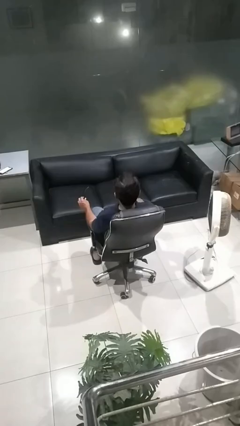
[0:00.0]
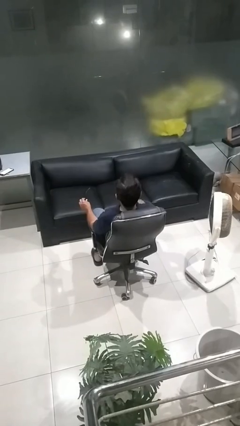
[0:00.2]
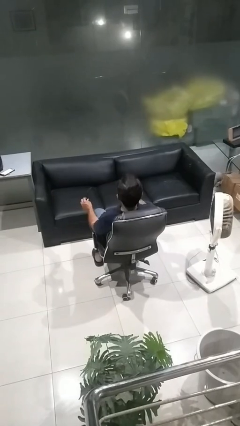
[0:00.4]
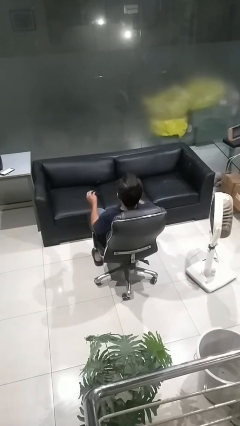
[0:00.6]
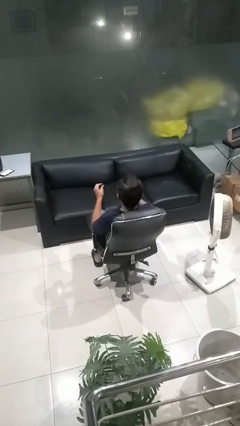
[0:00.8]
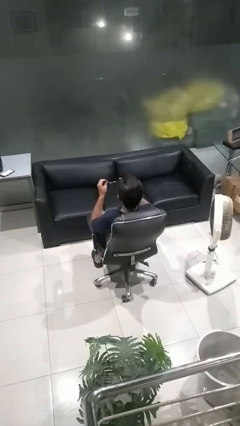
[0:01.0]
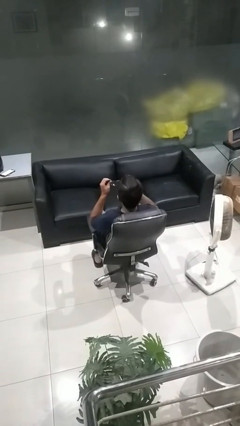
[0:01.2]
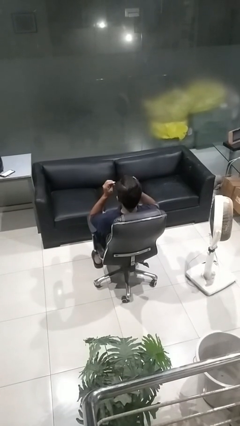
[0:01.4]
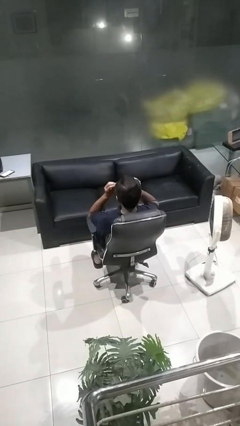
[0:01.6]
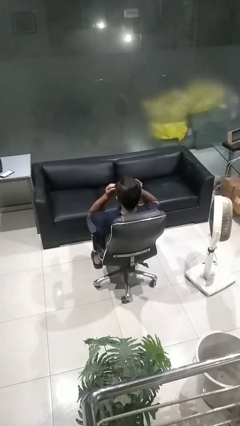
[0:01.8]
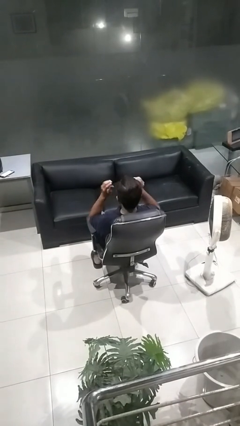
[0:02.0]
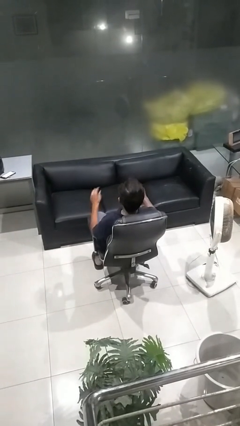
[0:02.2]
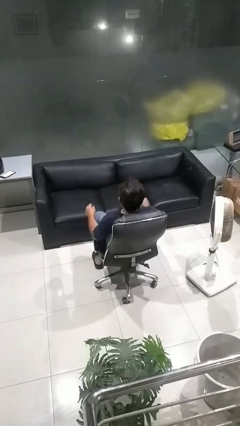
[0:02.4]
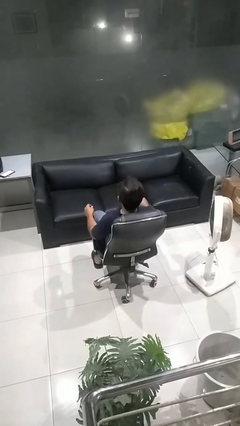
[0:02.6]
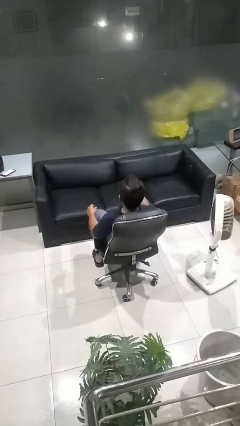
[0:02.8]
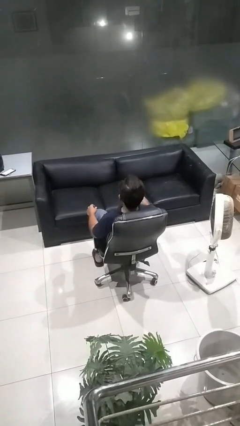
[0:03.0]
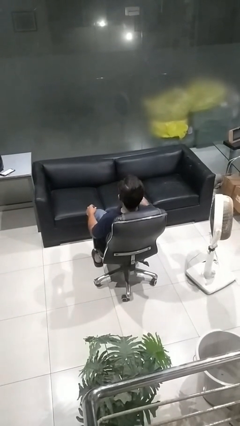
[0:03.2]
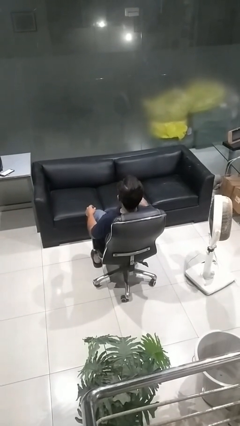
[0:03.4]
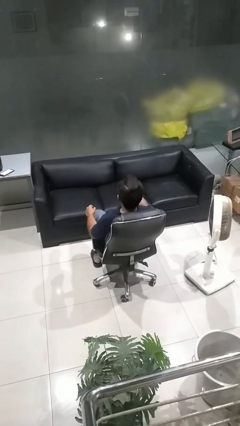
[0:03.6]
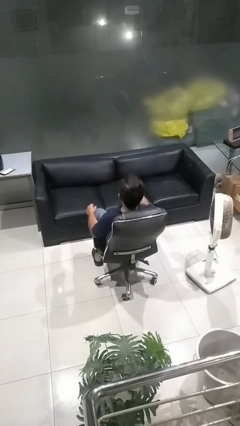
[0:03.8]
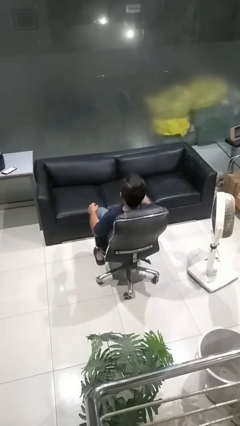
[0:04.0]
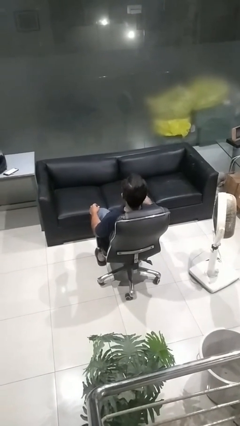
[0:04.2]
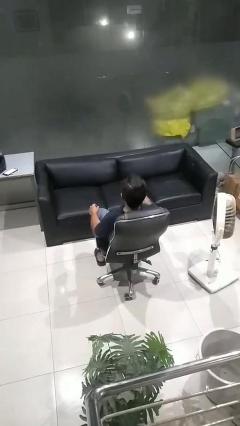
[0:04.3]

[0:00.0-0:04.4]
person puts on sunglasses

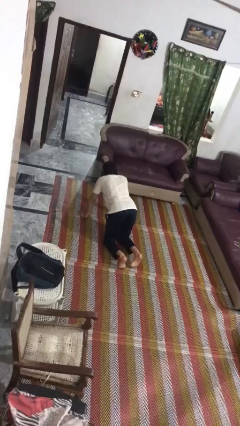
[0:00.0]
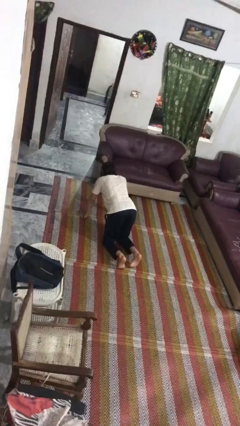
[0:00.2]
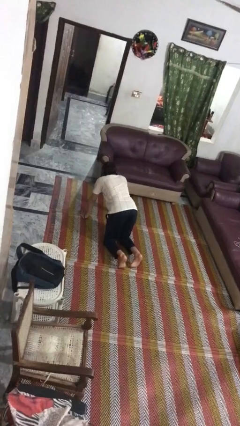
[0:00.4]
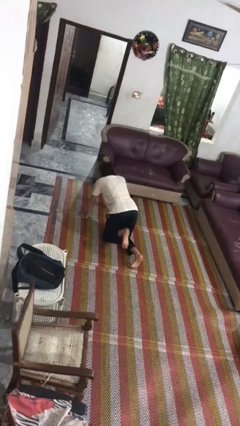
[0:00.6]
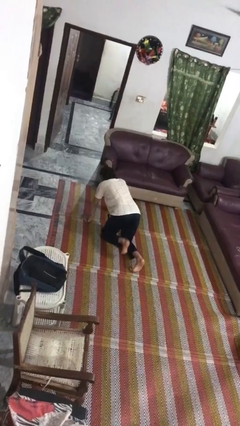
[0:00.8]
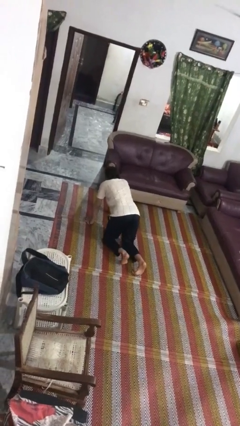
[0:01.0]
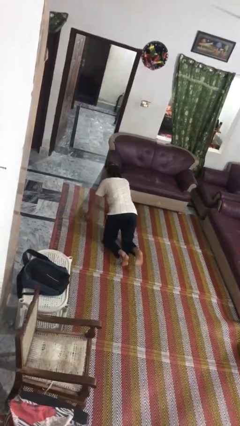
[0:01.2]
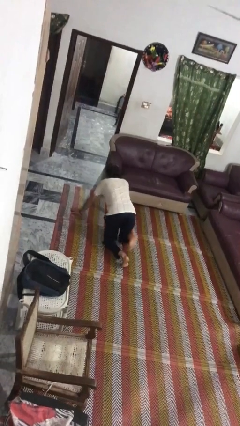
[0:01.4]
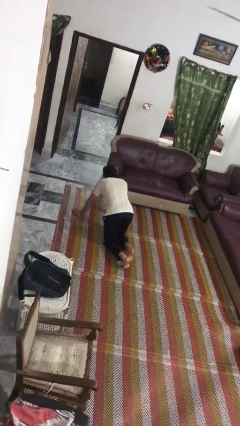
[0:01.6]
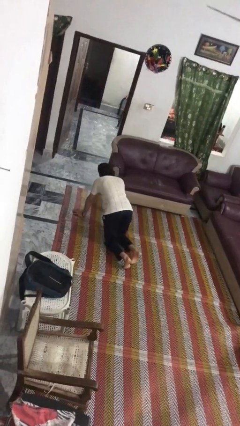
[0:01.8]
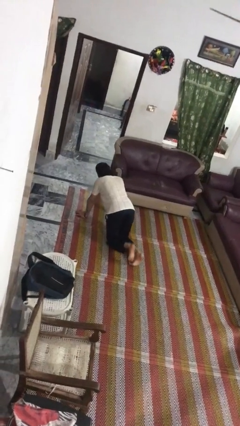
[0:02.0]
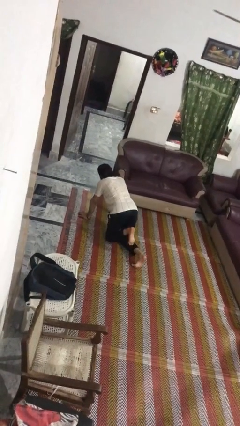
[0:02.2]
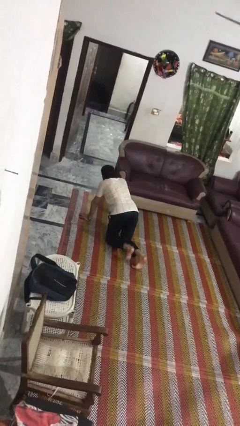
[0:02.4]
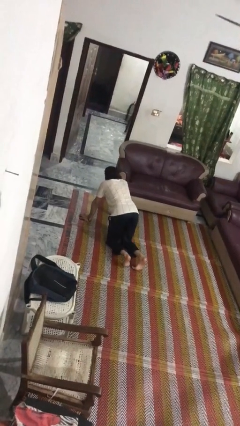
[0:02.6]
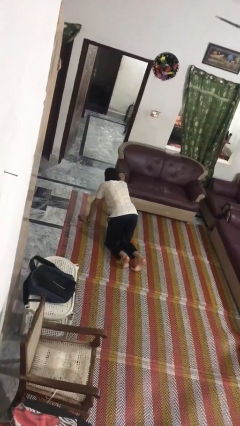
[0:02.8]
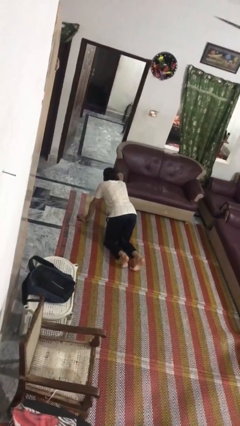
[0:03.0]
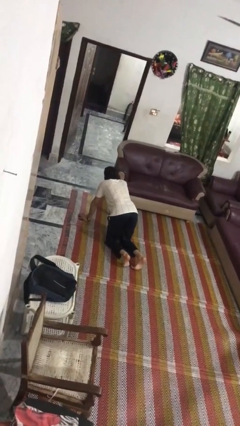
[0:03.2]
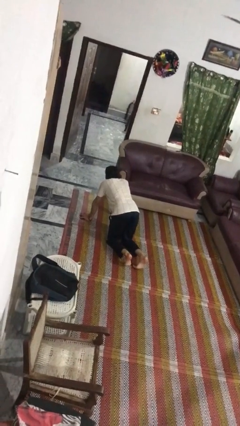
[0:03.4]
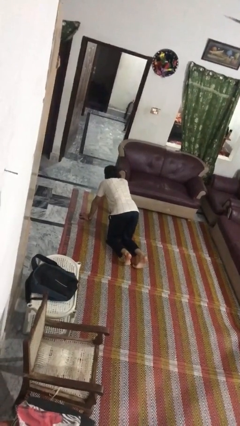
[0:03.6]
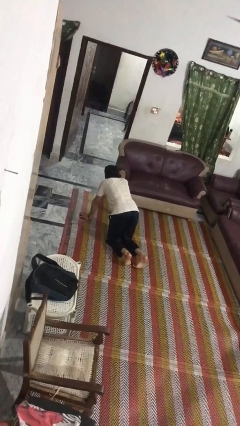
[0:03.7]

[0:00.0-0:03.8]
person crawls

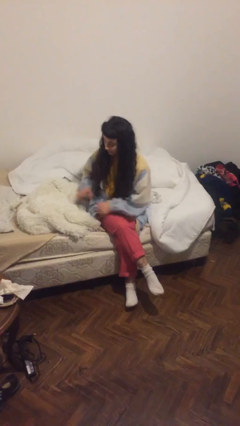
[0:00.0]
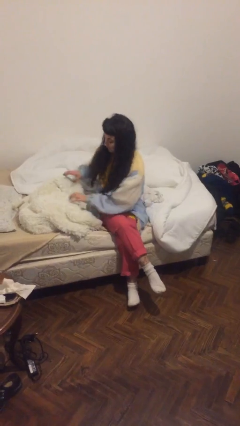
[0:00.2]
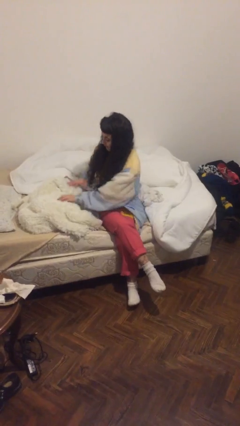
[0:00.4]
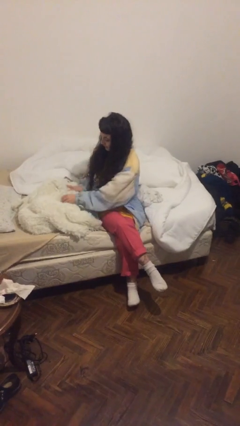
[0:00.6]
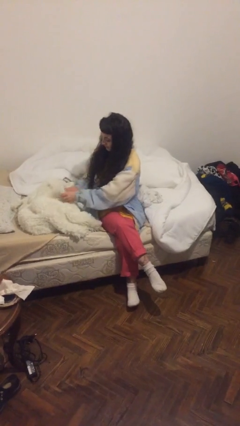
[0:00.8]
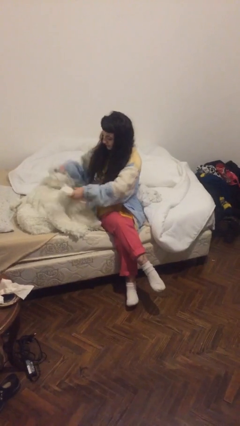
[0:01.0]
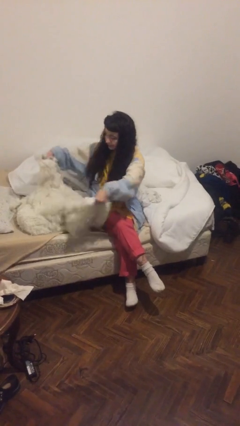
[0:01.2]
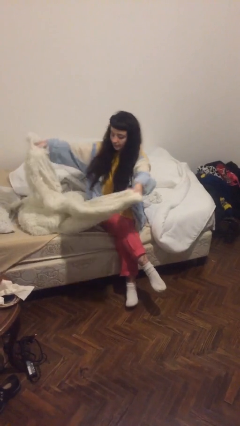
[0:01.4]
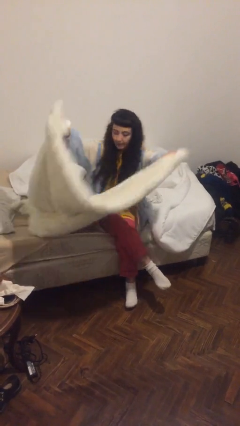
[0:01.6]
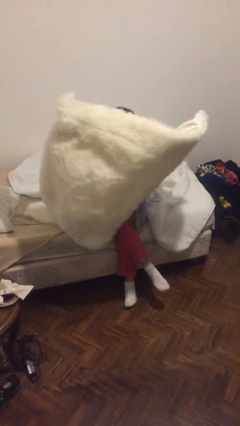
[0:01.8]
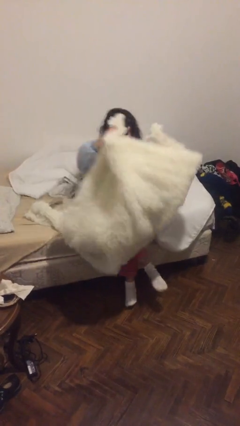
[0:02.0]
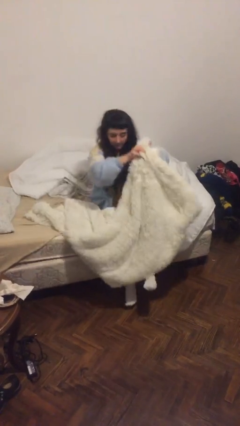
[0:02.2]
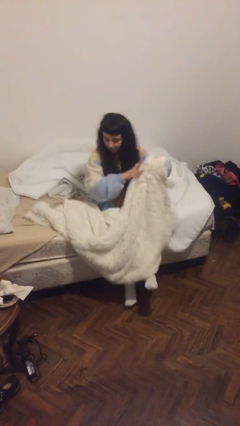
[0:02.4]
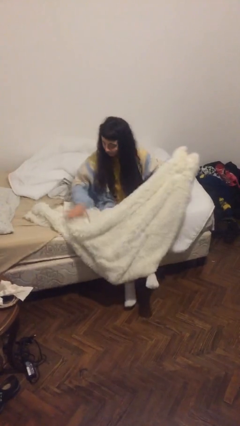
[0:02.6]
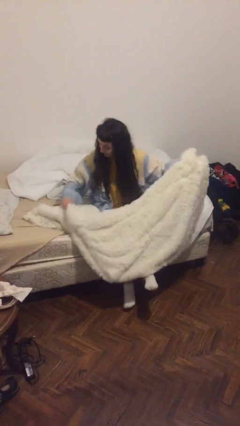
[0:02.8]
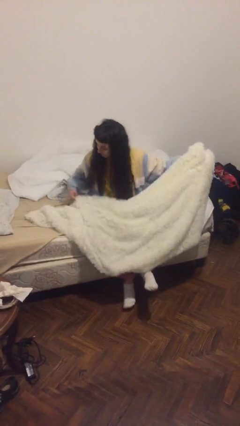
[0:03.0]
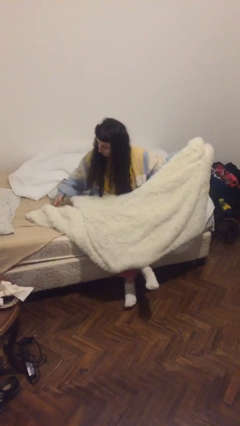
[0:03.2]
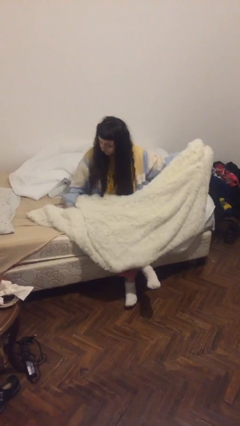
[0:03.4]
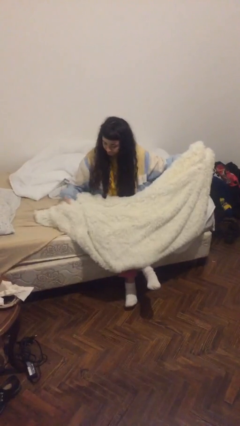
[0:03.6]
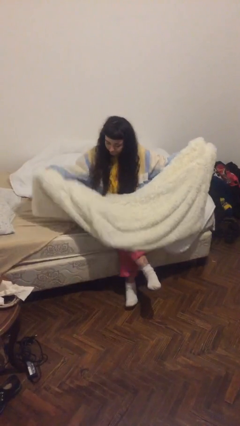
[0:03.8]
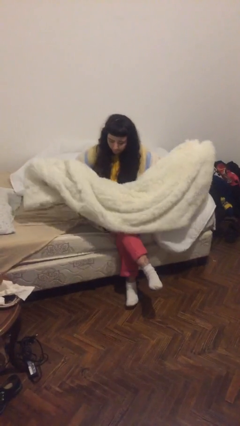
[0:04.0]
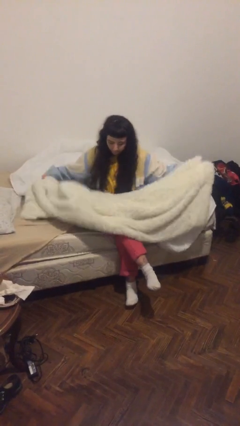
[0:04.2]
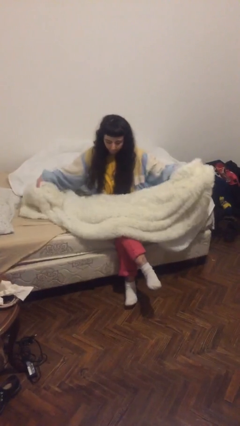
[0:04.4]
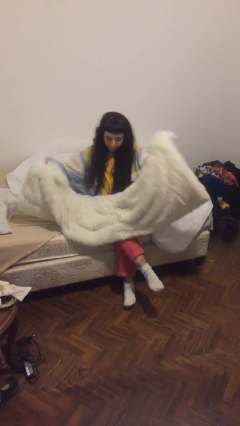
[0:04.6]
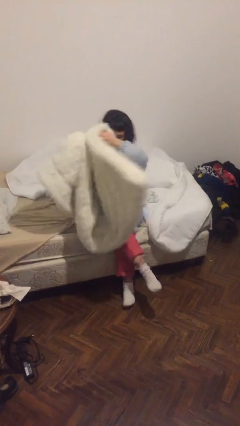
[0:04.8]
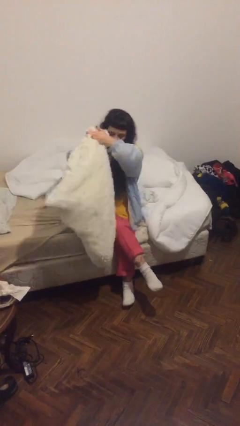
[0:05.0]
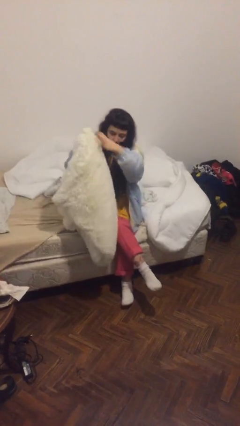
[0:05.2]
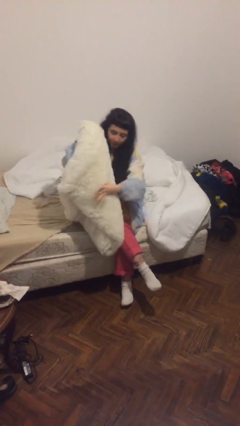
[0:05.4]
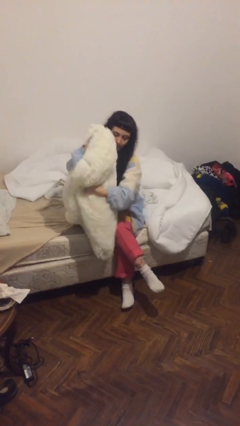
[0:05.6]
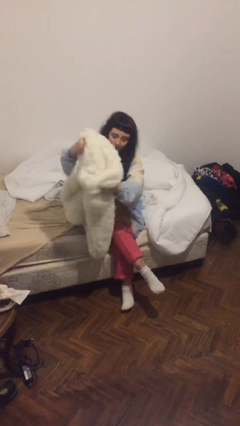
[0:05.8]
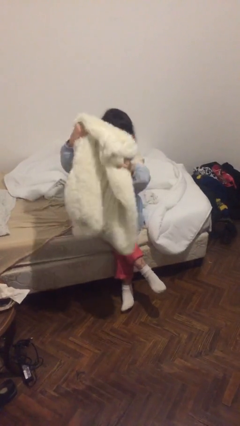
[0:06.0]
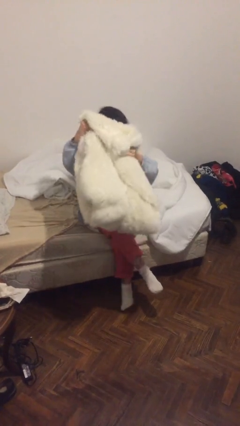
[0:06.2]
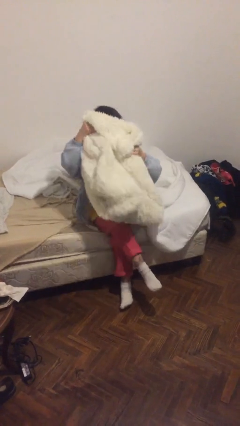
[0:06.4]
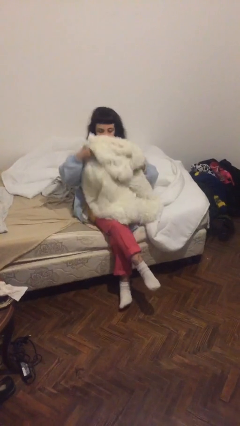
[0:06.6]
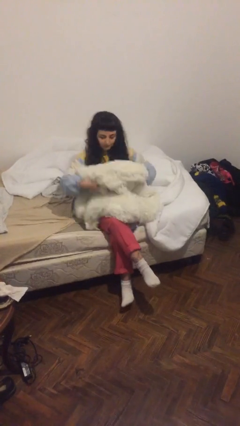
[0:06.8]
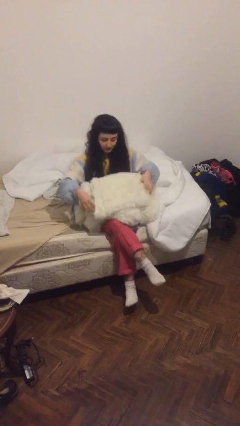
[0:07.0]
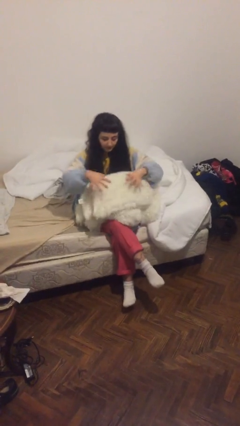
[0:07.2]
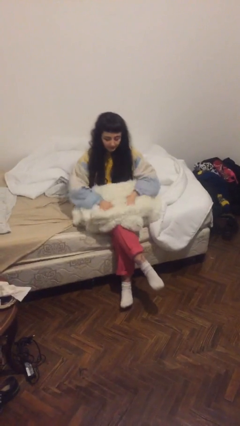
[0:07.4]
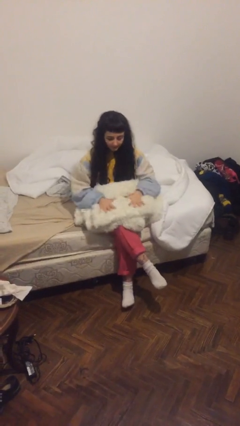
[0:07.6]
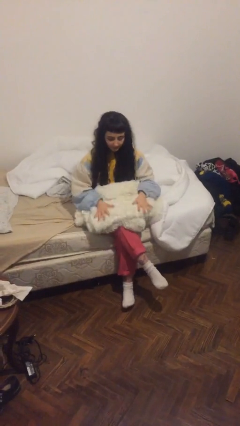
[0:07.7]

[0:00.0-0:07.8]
person folds blanket

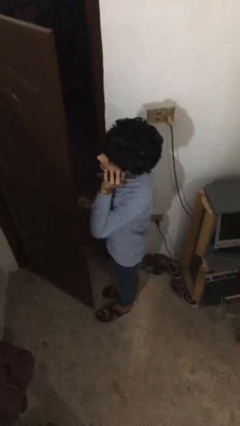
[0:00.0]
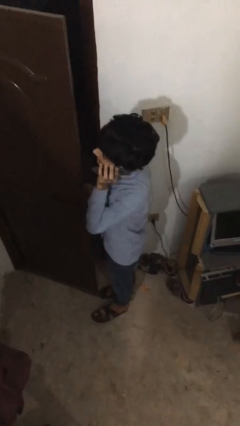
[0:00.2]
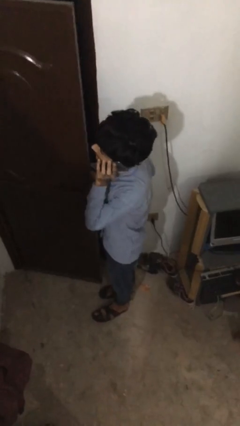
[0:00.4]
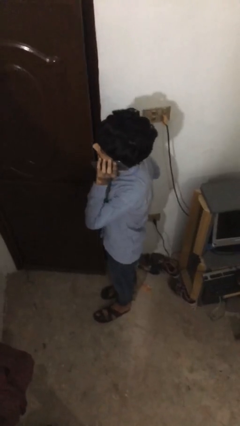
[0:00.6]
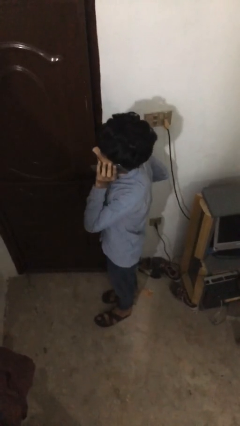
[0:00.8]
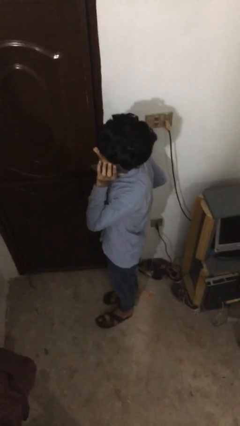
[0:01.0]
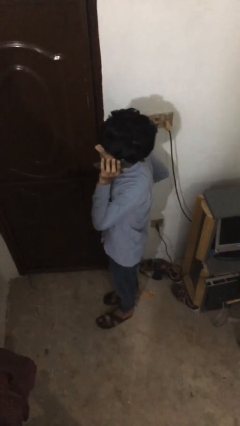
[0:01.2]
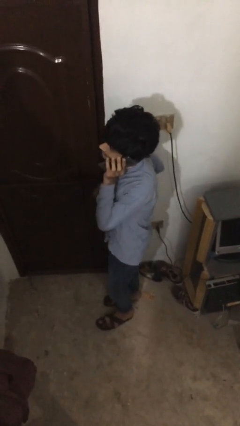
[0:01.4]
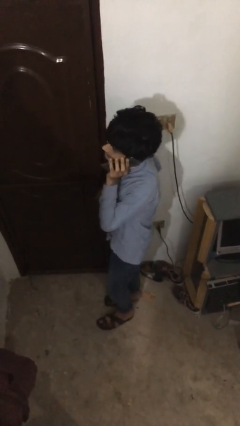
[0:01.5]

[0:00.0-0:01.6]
person closes facility door

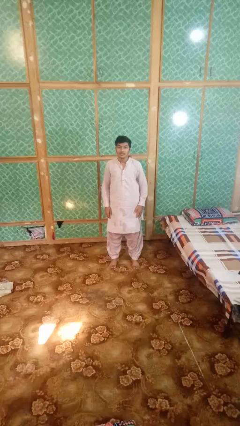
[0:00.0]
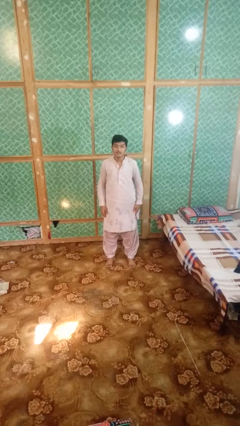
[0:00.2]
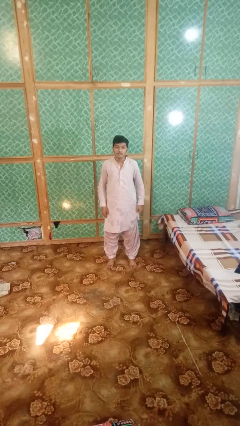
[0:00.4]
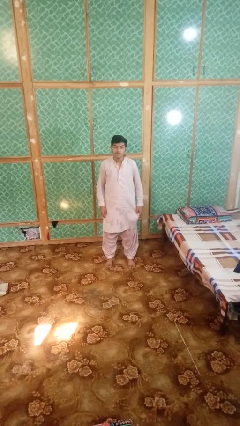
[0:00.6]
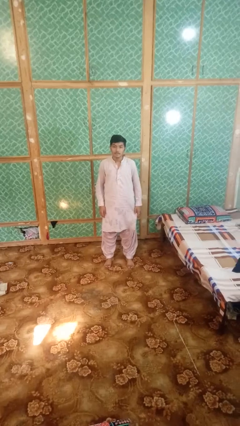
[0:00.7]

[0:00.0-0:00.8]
person scratches face
